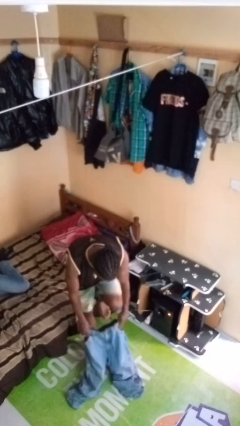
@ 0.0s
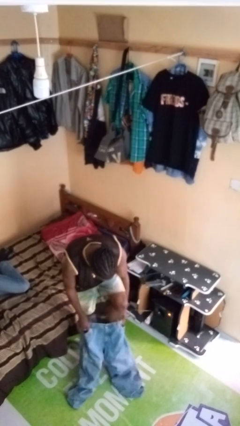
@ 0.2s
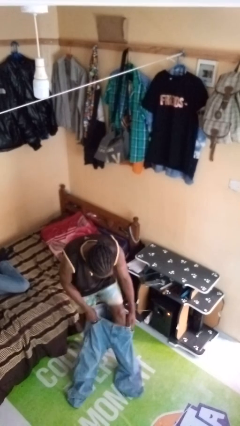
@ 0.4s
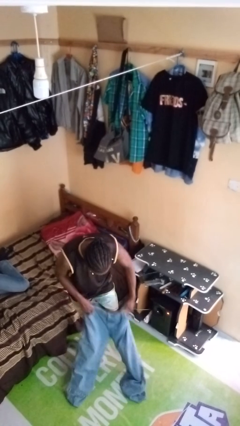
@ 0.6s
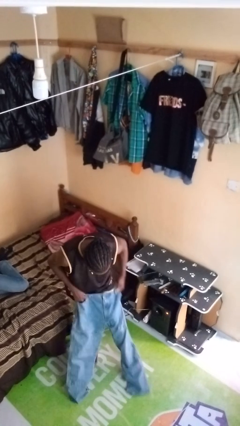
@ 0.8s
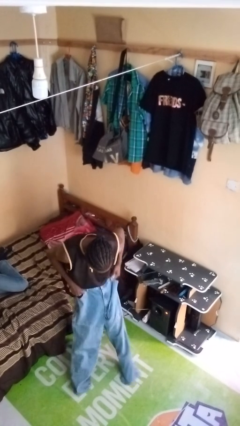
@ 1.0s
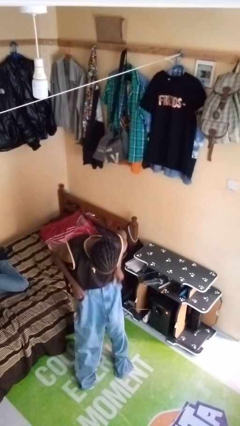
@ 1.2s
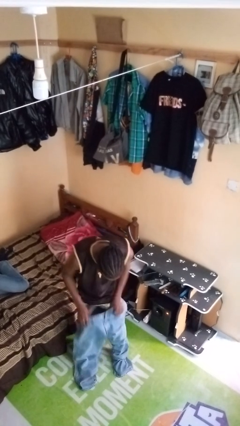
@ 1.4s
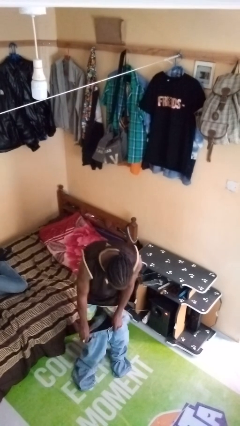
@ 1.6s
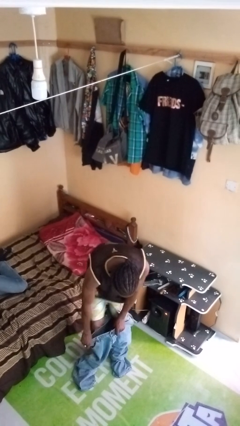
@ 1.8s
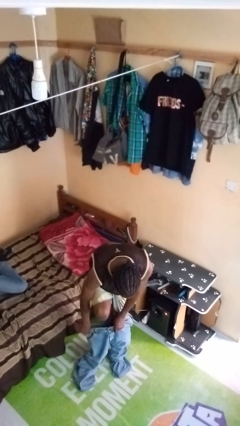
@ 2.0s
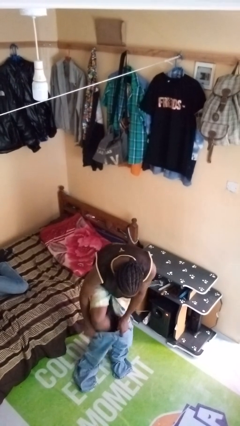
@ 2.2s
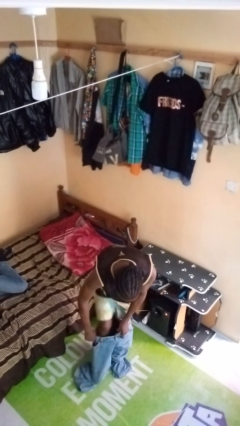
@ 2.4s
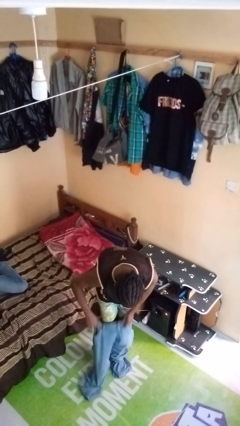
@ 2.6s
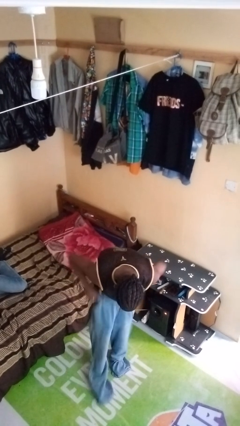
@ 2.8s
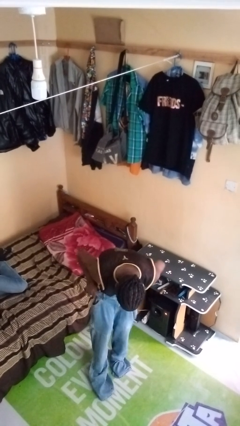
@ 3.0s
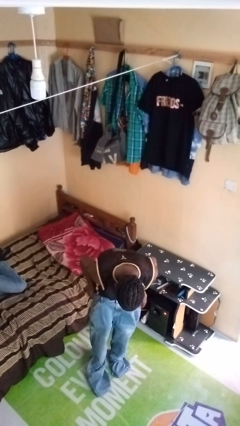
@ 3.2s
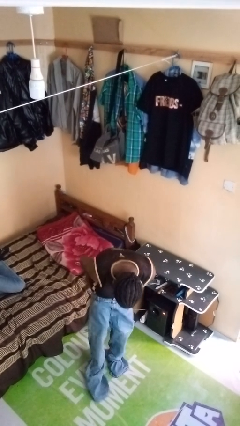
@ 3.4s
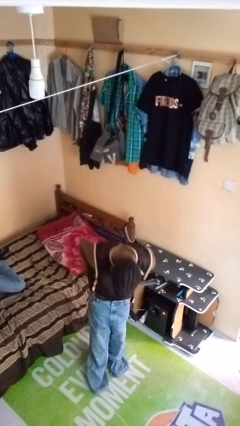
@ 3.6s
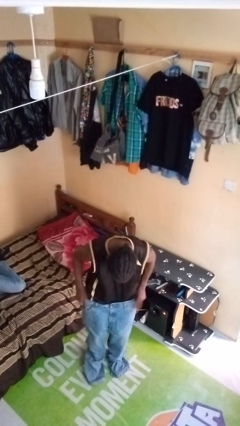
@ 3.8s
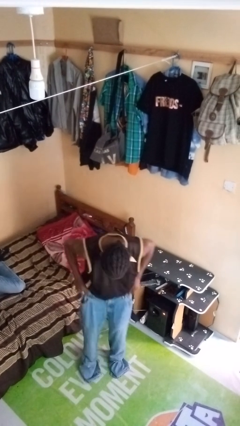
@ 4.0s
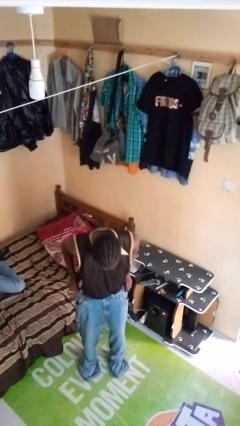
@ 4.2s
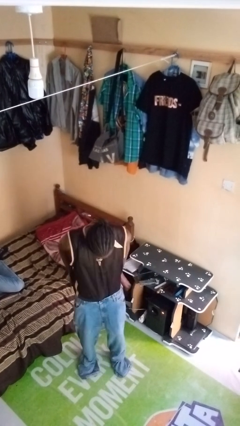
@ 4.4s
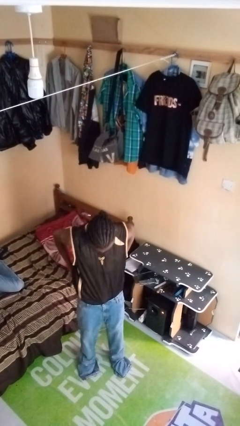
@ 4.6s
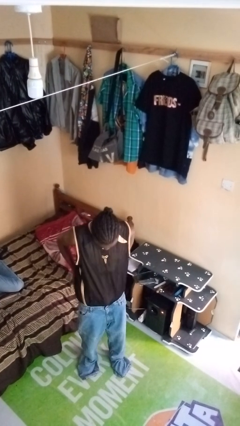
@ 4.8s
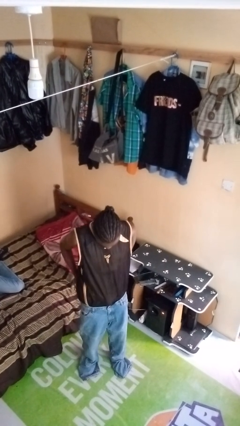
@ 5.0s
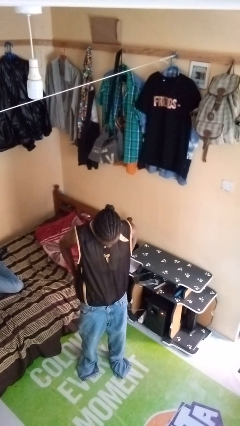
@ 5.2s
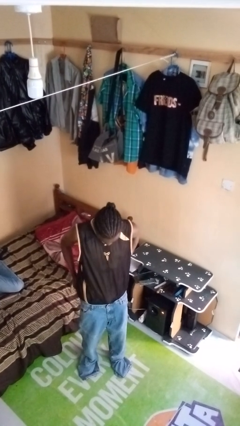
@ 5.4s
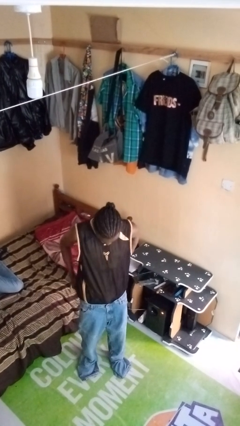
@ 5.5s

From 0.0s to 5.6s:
person puts on pants

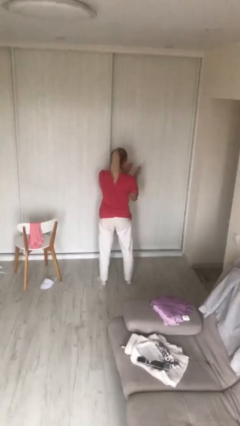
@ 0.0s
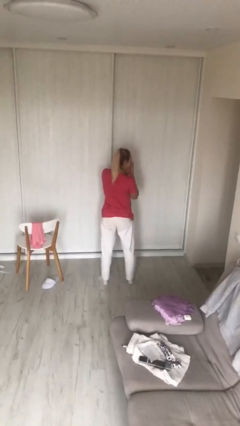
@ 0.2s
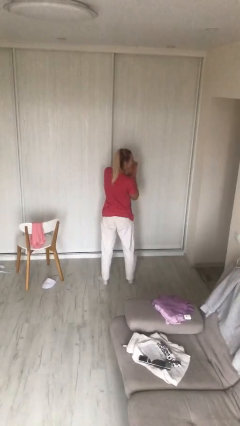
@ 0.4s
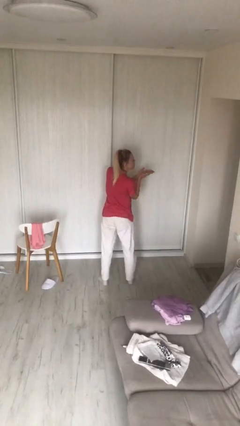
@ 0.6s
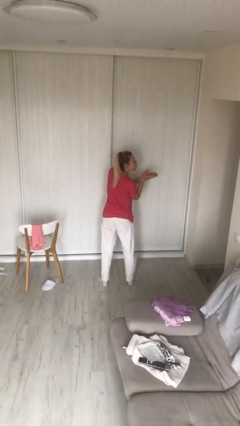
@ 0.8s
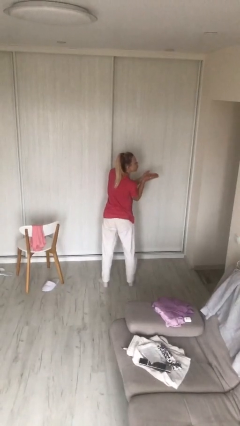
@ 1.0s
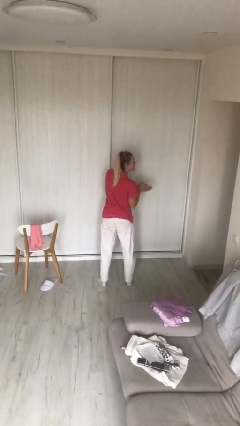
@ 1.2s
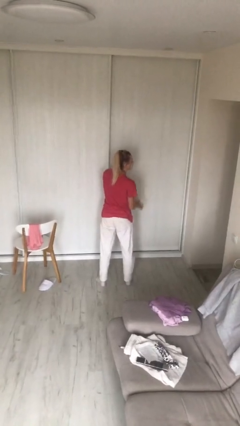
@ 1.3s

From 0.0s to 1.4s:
person gestures blow kiss

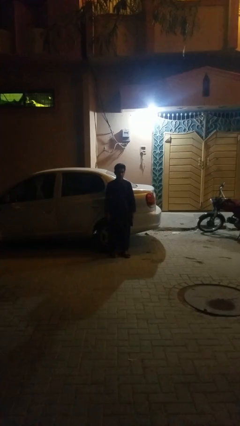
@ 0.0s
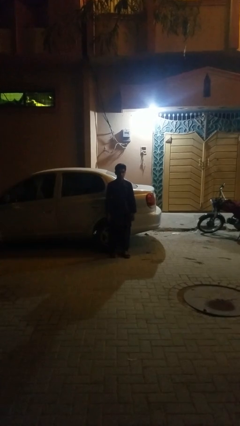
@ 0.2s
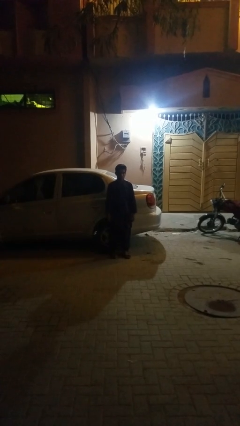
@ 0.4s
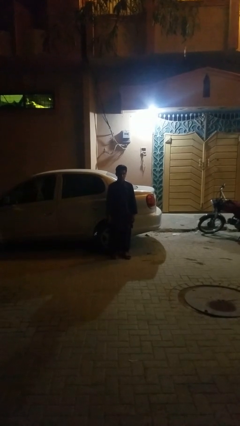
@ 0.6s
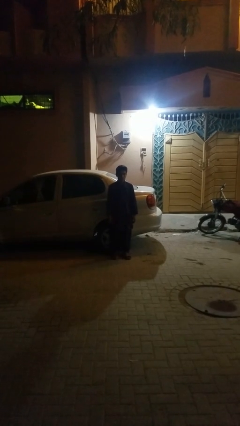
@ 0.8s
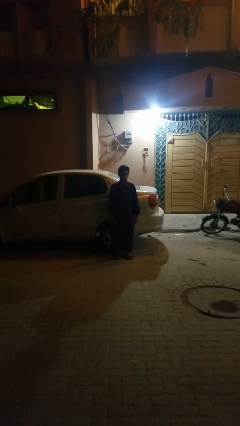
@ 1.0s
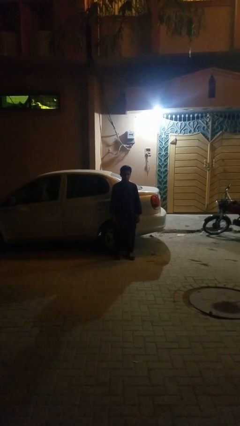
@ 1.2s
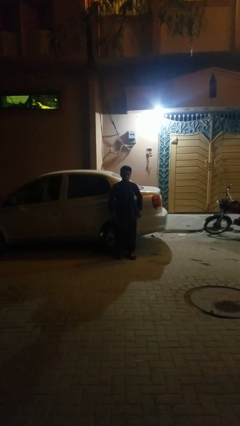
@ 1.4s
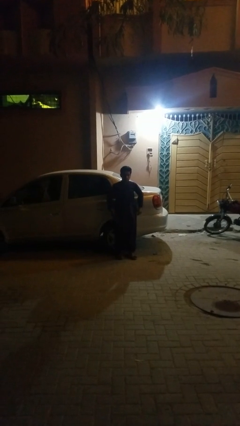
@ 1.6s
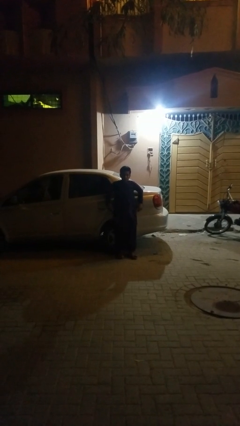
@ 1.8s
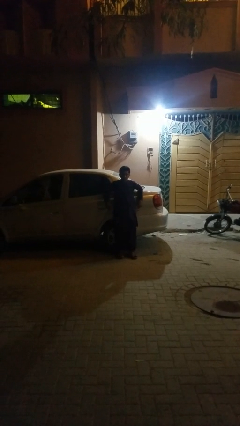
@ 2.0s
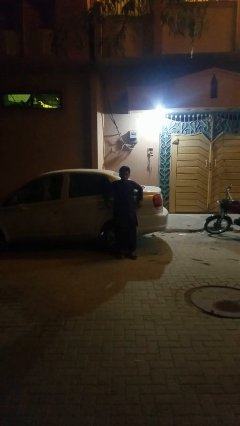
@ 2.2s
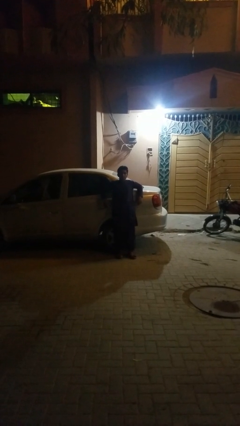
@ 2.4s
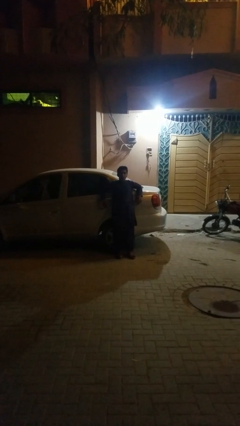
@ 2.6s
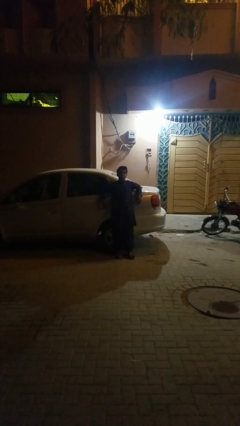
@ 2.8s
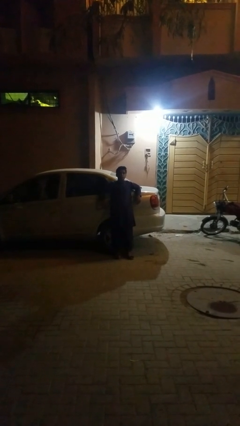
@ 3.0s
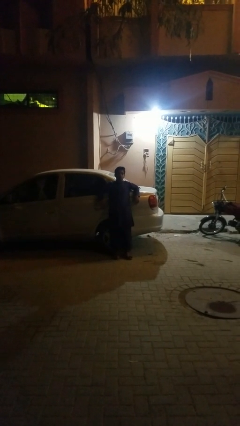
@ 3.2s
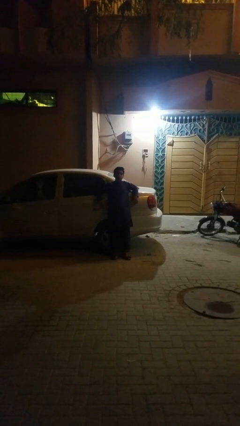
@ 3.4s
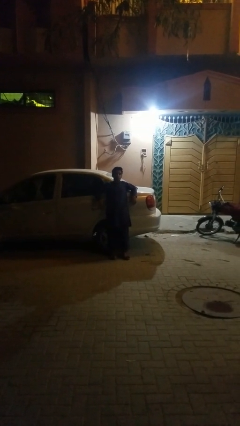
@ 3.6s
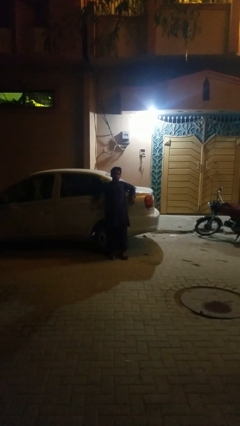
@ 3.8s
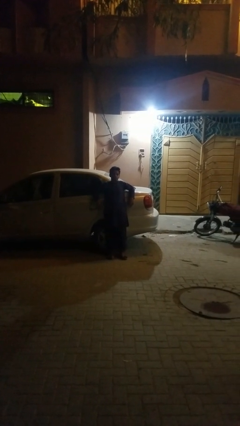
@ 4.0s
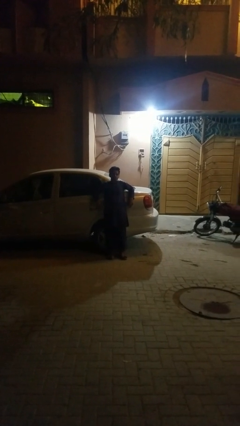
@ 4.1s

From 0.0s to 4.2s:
person leans against car

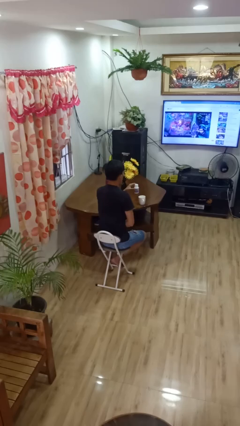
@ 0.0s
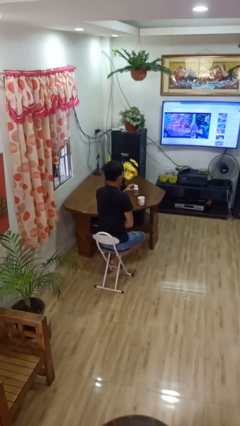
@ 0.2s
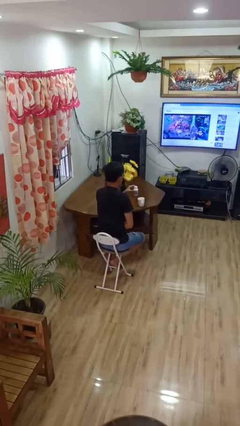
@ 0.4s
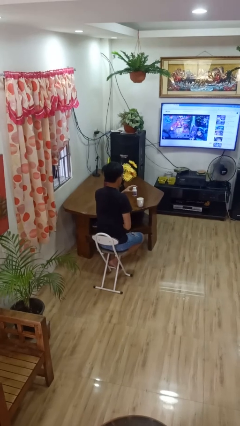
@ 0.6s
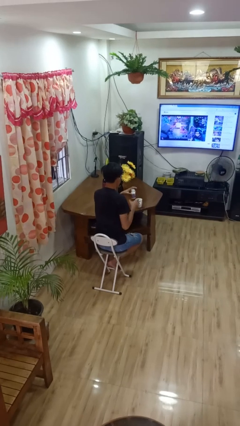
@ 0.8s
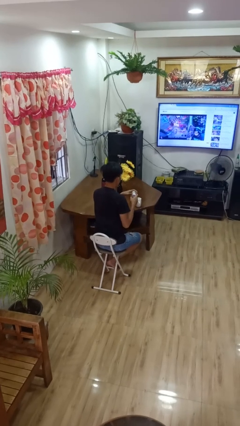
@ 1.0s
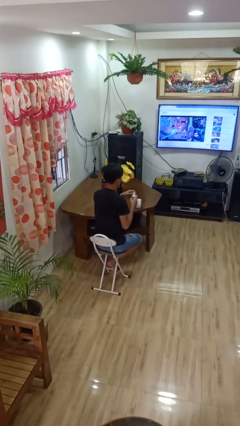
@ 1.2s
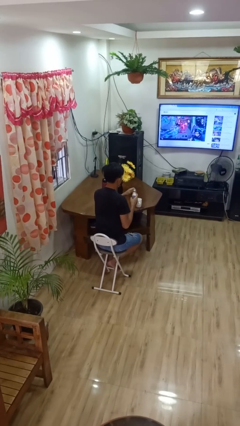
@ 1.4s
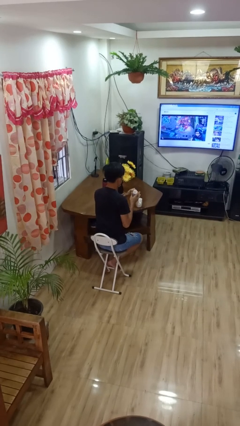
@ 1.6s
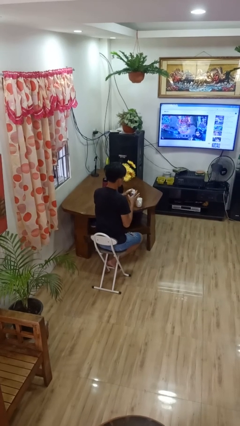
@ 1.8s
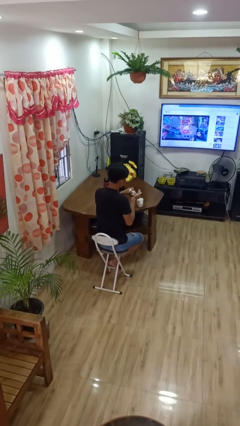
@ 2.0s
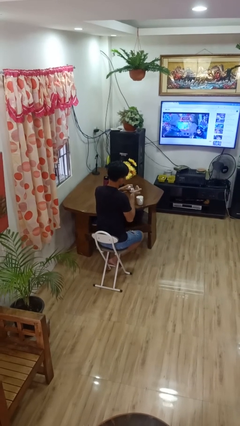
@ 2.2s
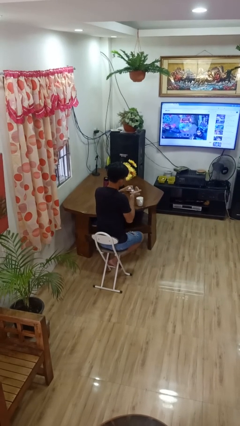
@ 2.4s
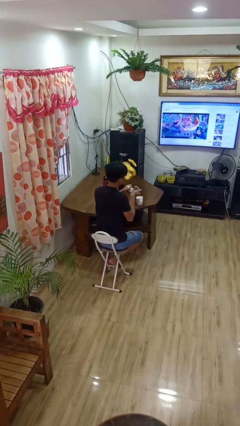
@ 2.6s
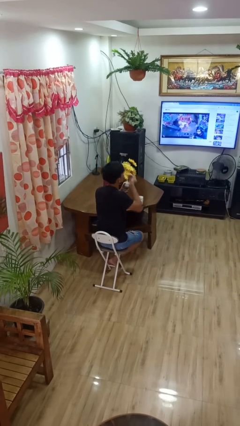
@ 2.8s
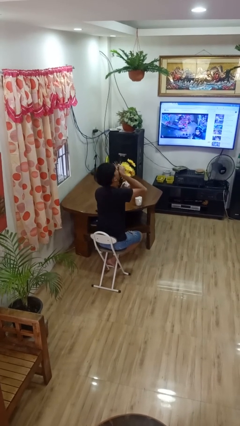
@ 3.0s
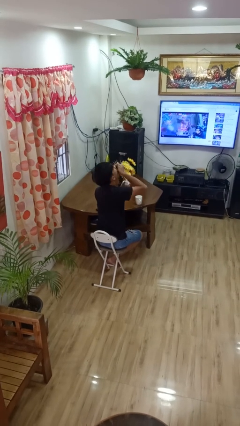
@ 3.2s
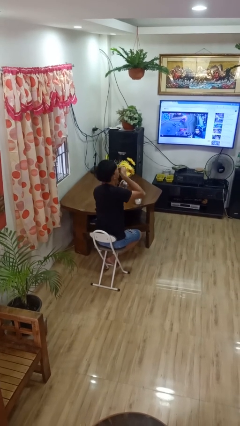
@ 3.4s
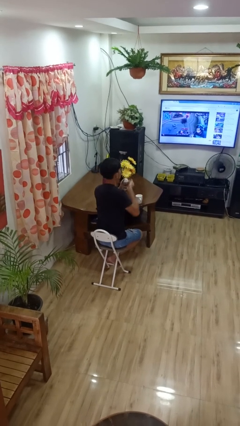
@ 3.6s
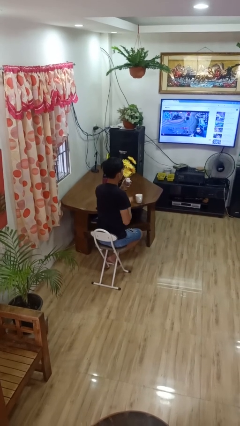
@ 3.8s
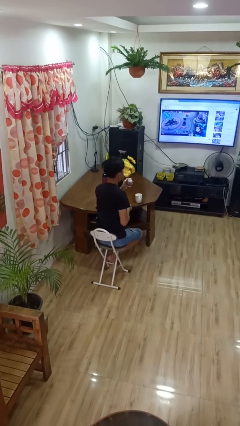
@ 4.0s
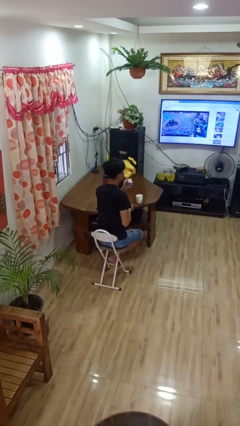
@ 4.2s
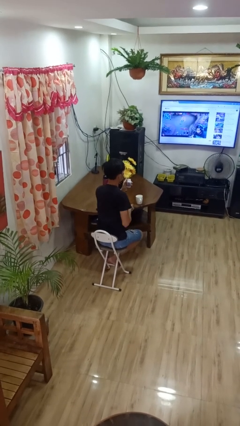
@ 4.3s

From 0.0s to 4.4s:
person takes medicine pills

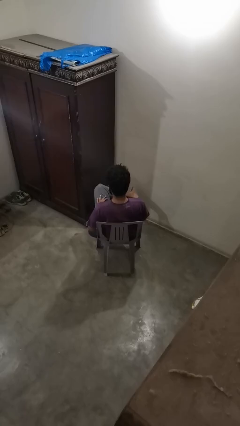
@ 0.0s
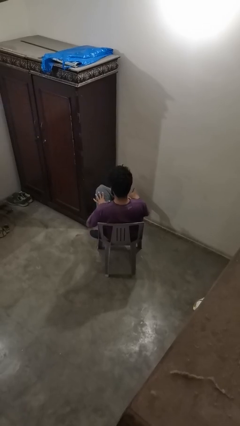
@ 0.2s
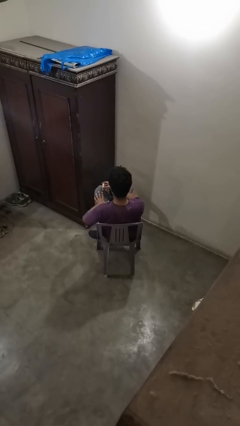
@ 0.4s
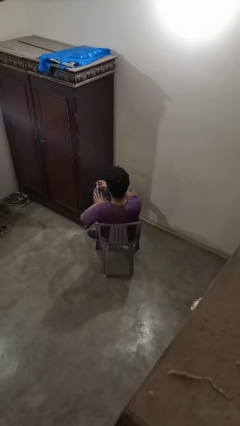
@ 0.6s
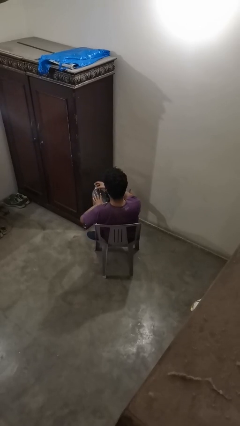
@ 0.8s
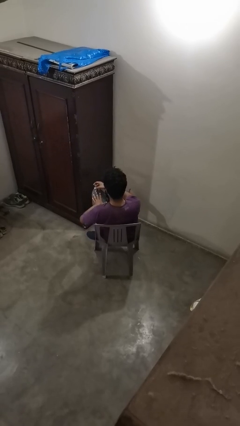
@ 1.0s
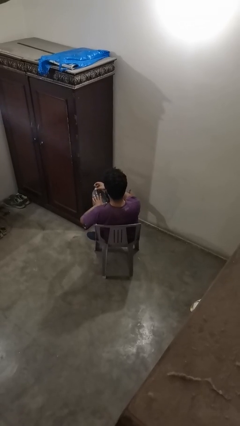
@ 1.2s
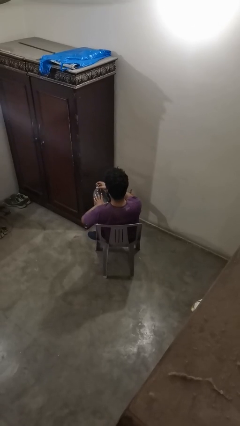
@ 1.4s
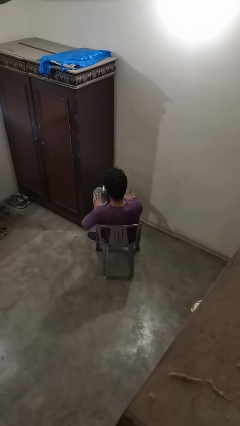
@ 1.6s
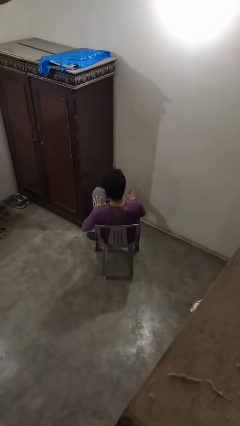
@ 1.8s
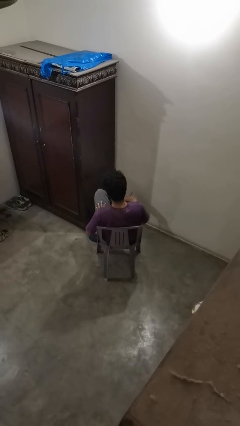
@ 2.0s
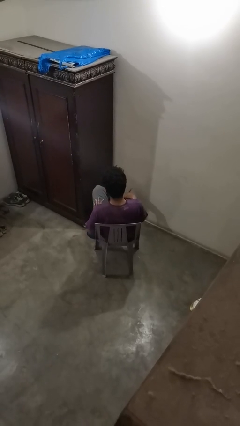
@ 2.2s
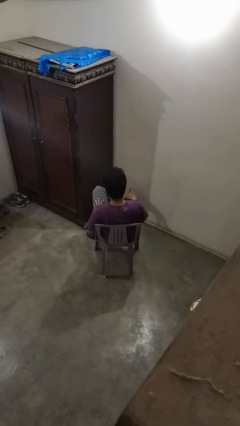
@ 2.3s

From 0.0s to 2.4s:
person clips fingernails
